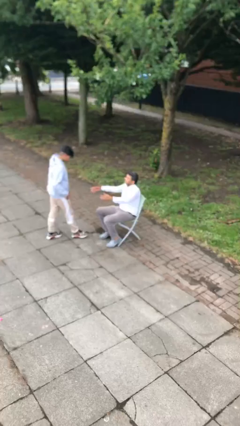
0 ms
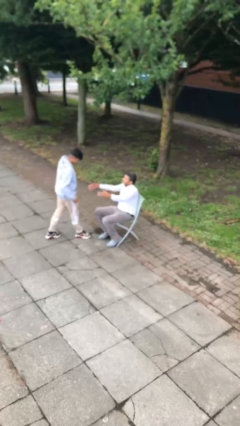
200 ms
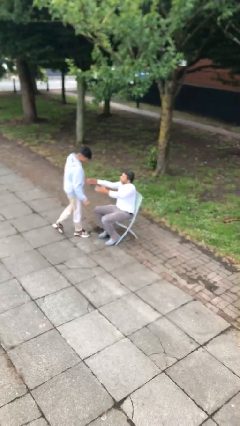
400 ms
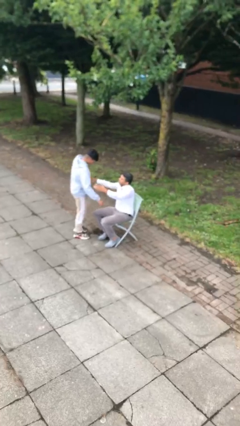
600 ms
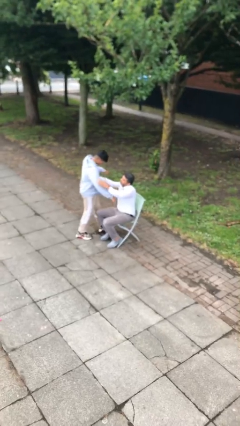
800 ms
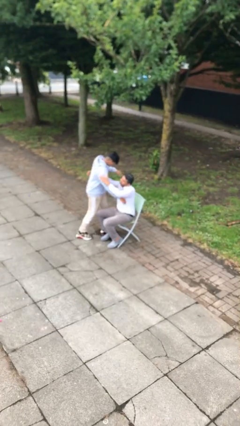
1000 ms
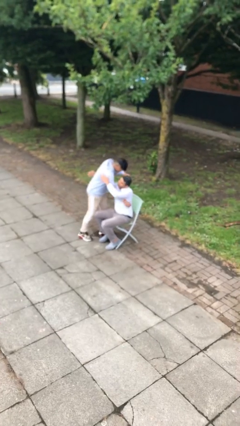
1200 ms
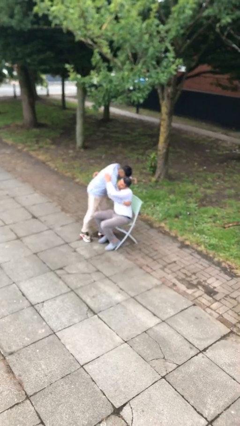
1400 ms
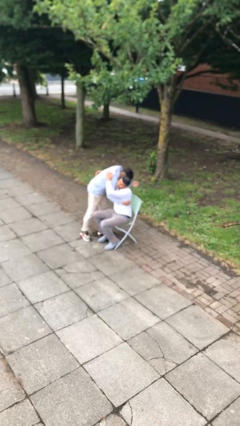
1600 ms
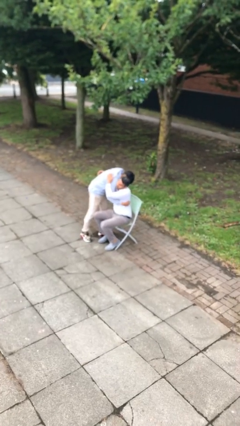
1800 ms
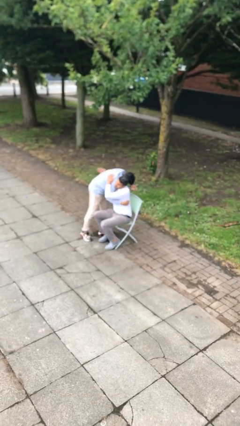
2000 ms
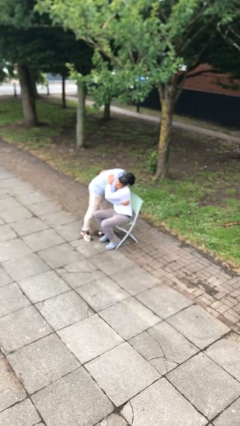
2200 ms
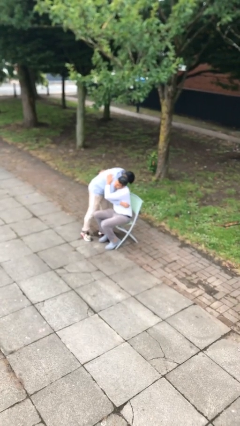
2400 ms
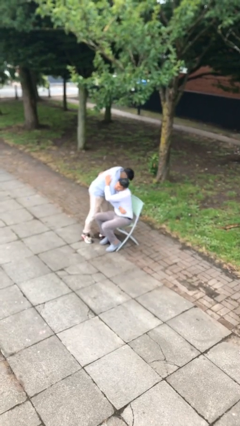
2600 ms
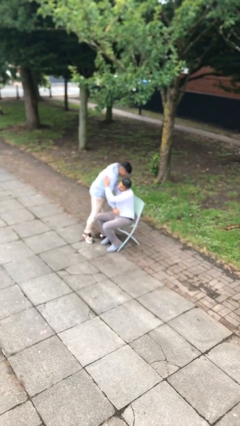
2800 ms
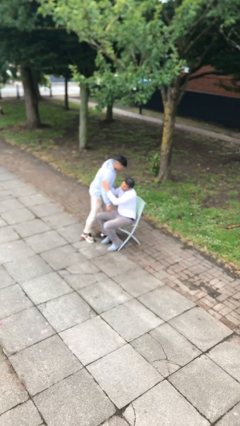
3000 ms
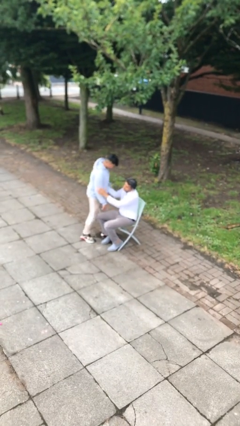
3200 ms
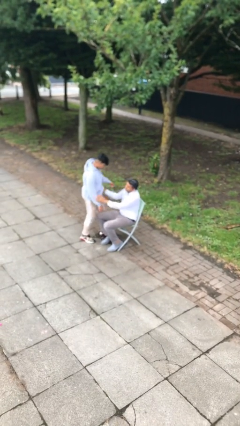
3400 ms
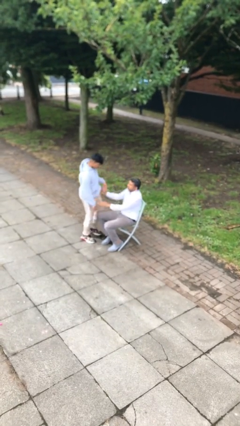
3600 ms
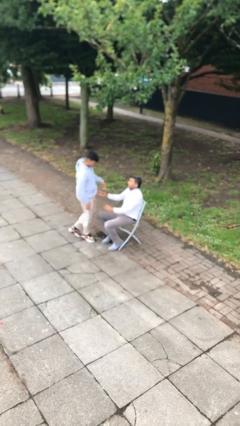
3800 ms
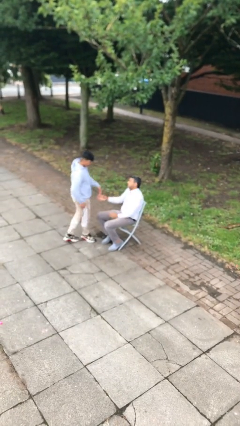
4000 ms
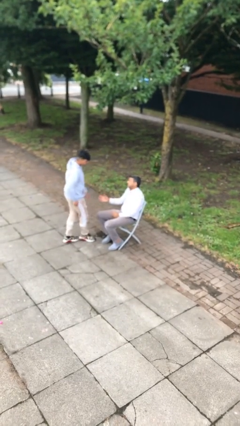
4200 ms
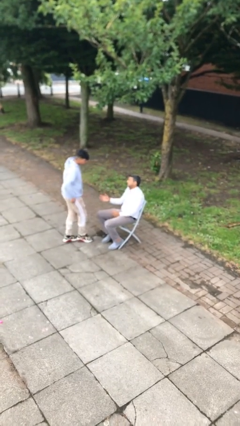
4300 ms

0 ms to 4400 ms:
person embraces person

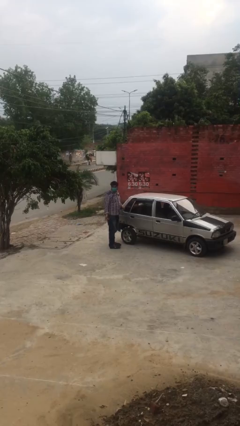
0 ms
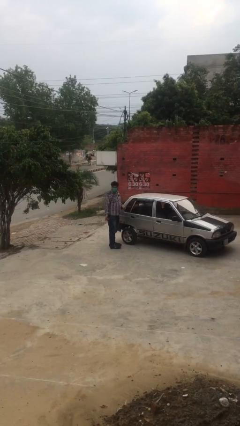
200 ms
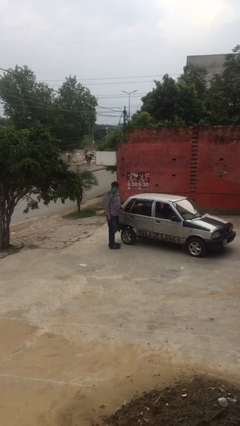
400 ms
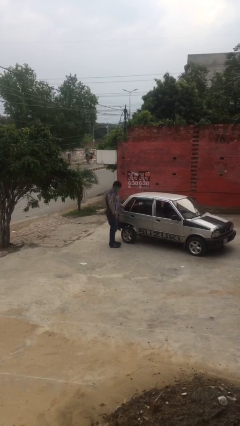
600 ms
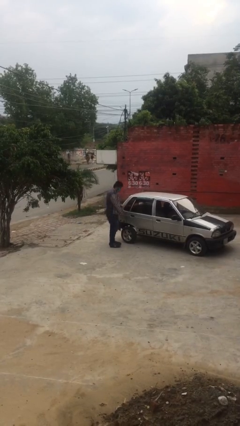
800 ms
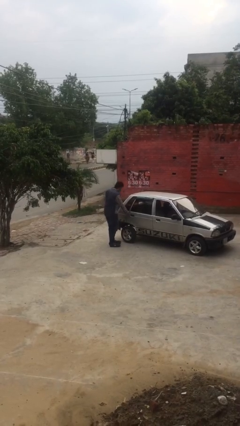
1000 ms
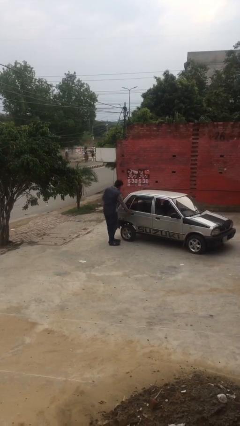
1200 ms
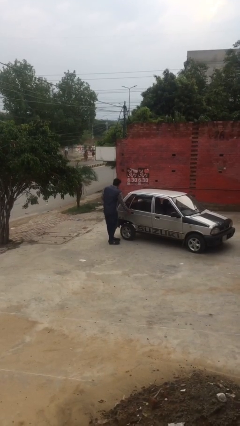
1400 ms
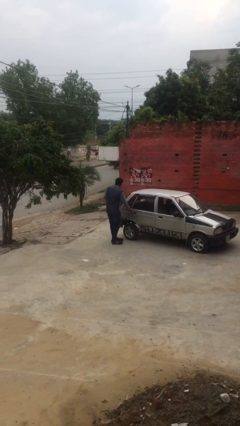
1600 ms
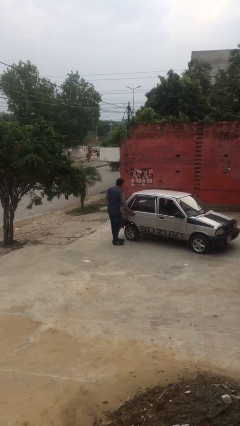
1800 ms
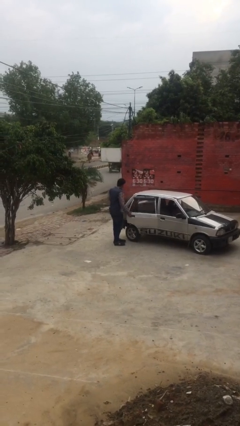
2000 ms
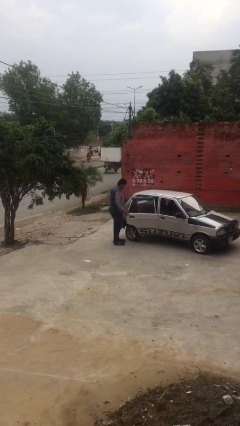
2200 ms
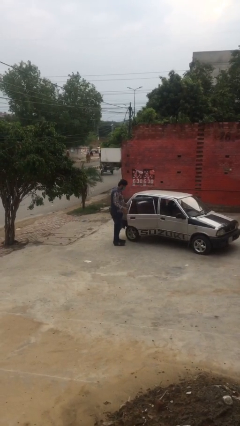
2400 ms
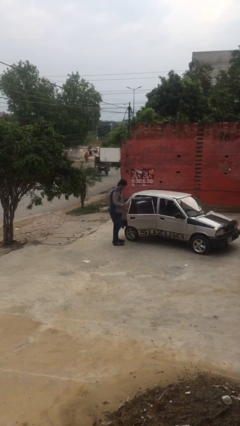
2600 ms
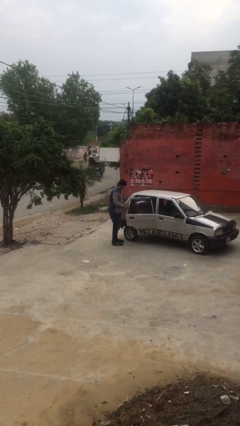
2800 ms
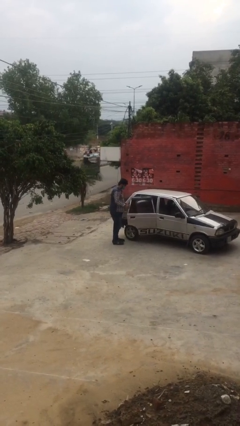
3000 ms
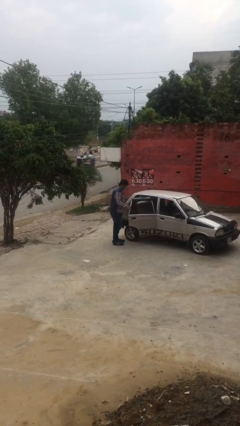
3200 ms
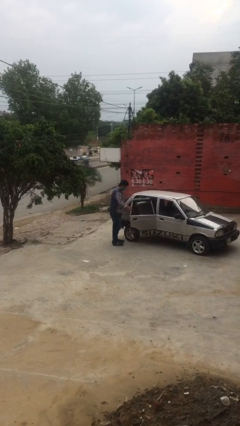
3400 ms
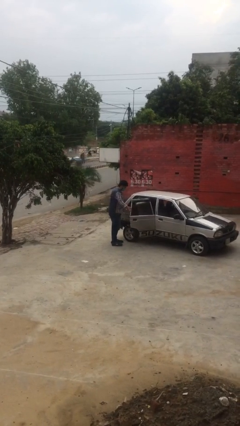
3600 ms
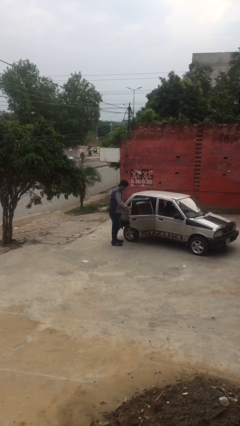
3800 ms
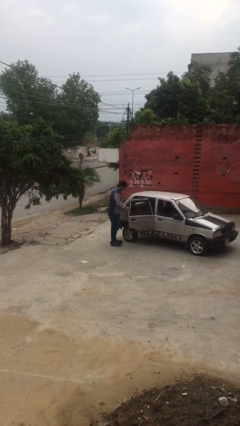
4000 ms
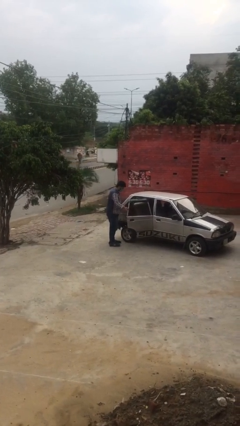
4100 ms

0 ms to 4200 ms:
person opens car door

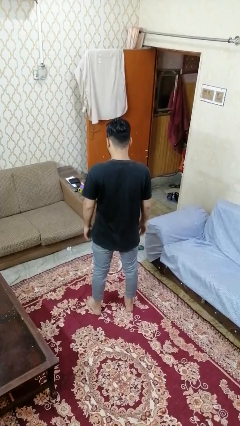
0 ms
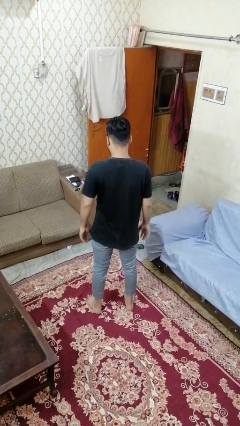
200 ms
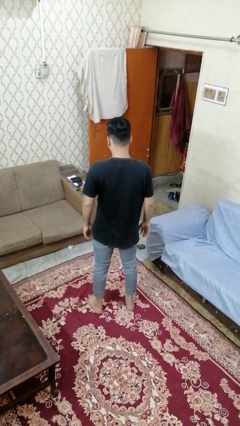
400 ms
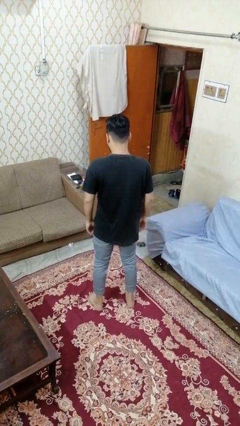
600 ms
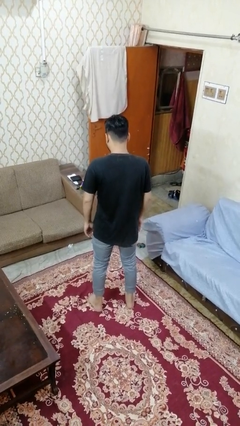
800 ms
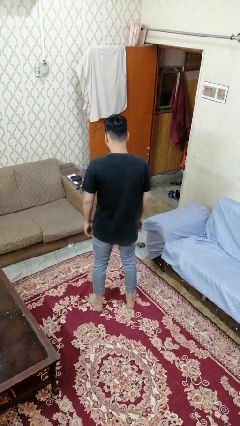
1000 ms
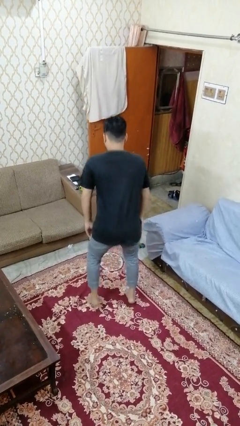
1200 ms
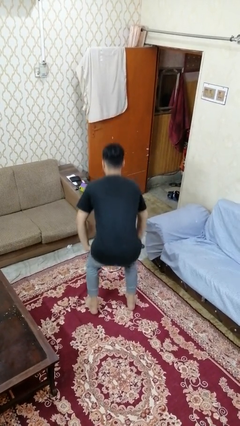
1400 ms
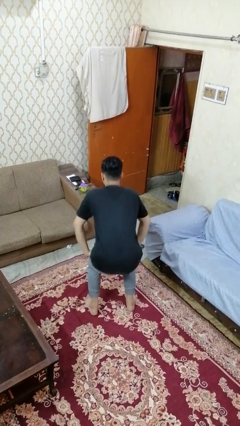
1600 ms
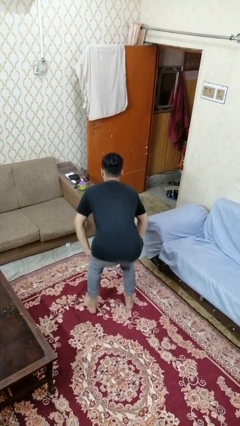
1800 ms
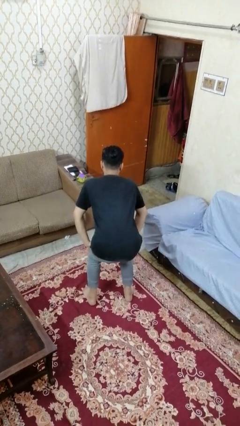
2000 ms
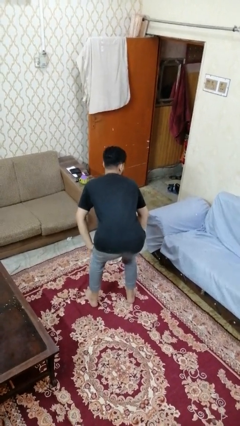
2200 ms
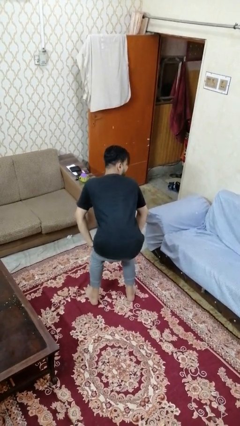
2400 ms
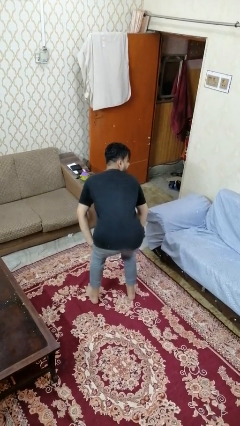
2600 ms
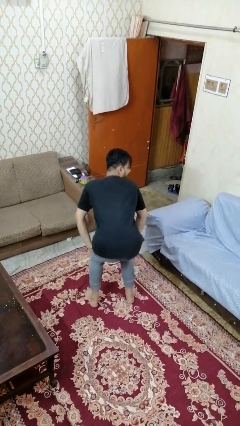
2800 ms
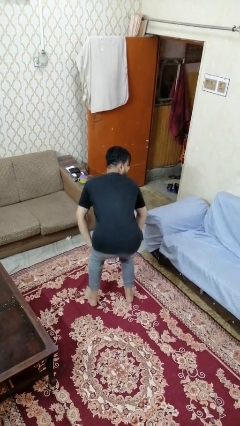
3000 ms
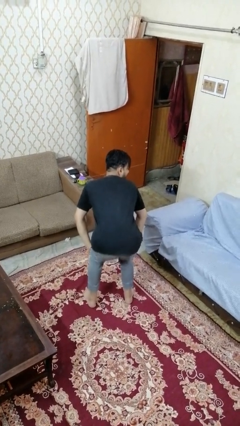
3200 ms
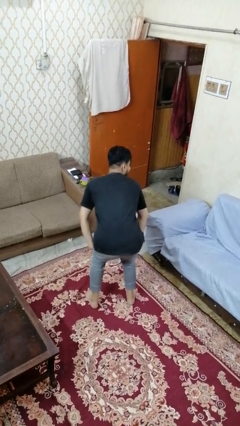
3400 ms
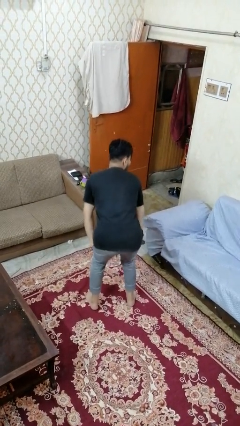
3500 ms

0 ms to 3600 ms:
person dances in place

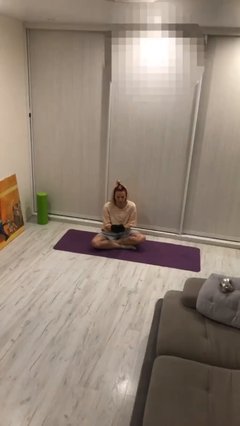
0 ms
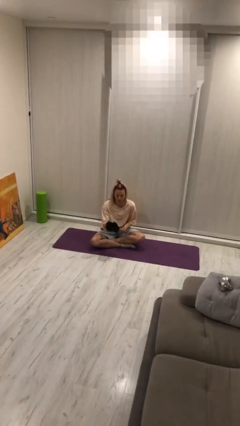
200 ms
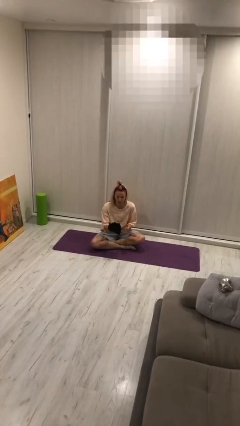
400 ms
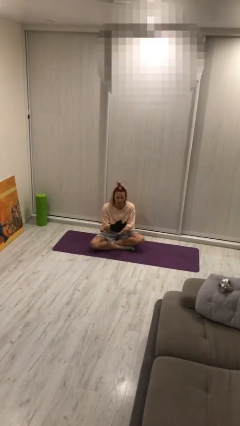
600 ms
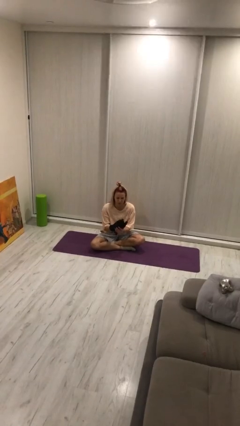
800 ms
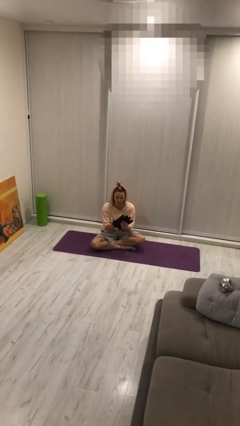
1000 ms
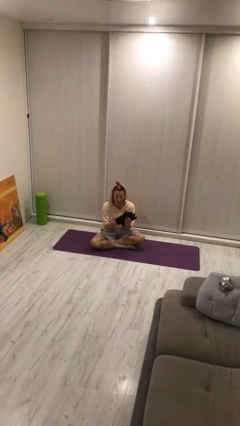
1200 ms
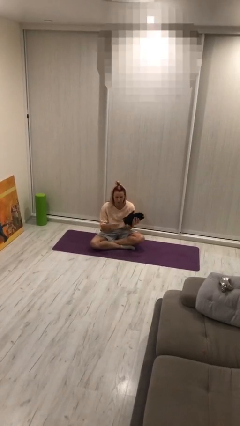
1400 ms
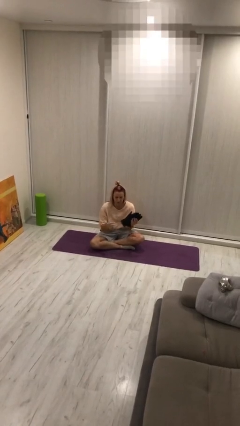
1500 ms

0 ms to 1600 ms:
person takes off gloves

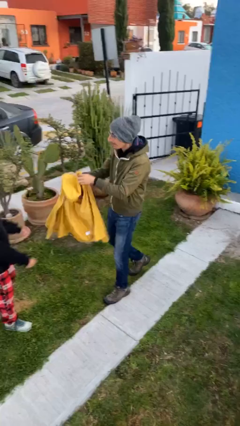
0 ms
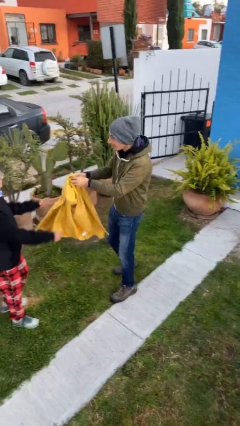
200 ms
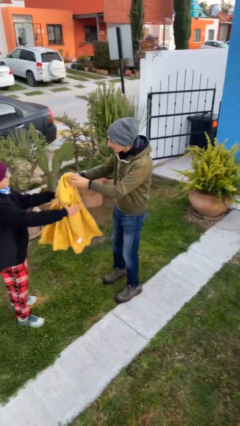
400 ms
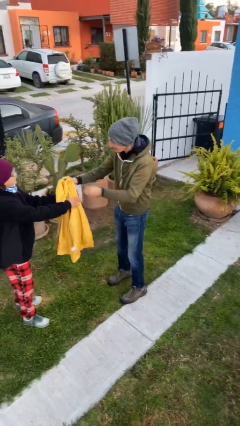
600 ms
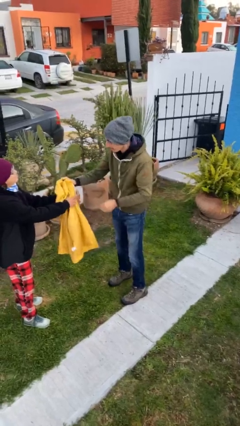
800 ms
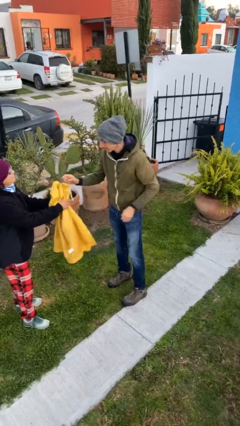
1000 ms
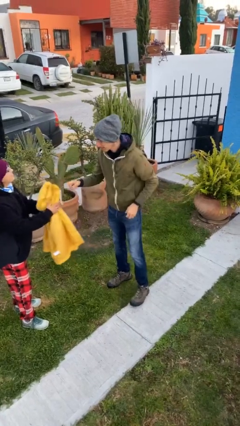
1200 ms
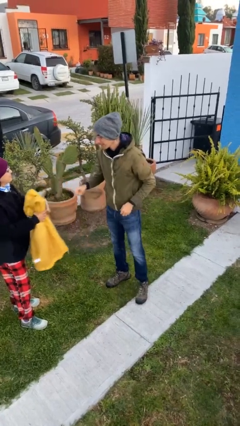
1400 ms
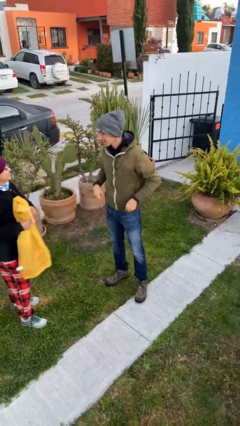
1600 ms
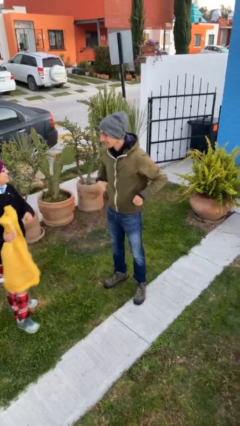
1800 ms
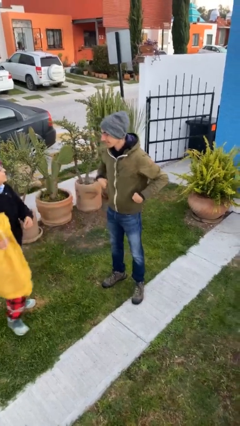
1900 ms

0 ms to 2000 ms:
person transfers object to person

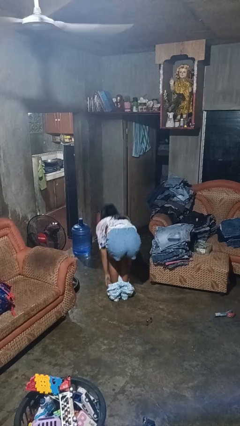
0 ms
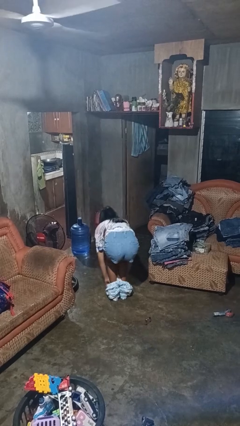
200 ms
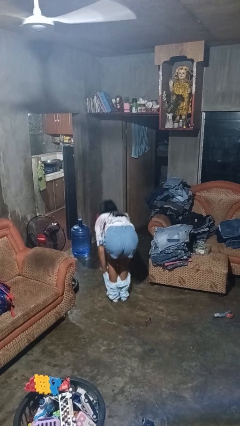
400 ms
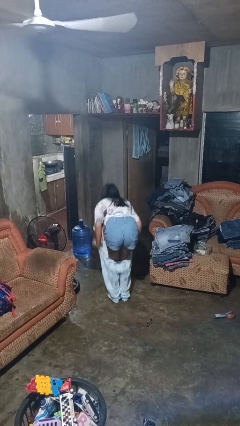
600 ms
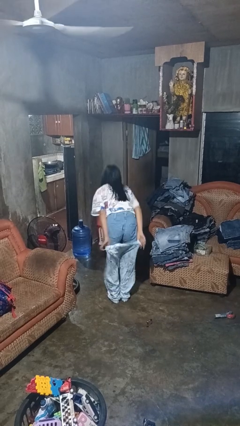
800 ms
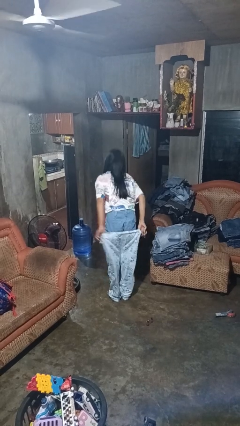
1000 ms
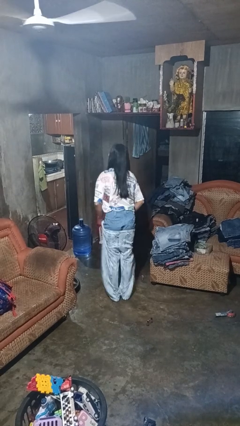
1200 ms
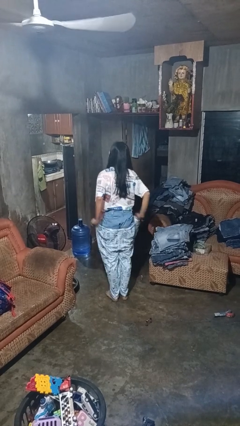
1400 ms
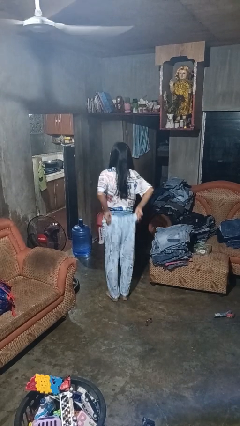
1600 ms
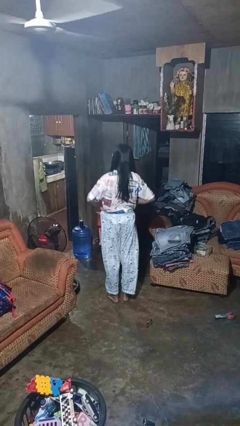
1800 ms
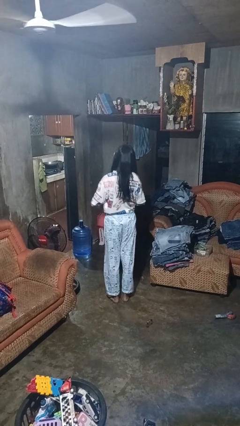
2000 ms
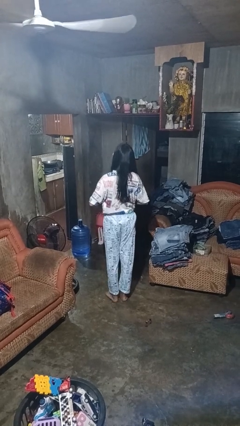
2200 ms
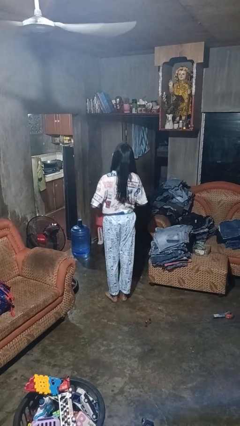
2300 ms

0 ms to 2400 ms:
person puts on pants
